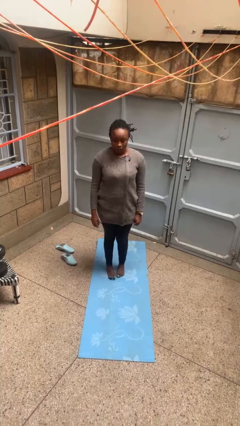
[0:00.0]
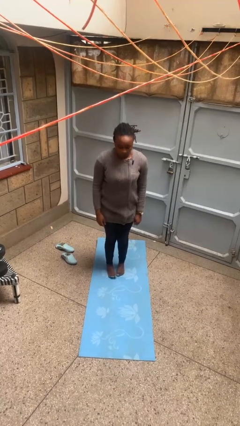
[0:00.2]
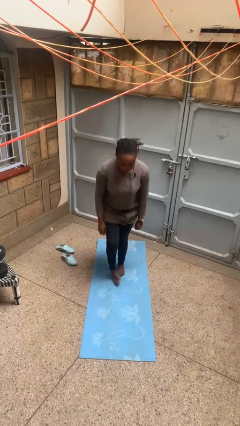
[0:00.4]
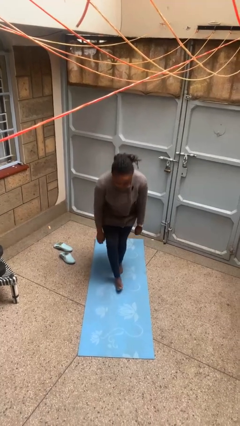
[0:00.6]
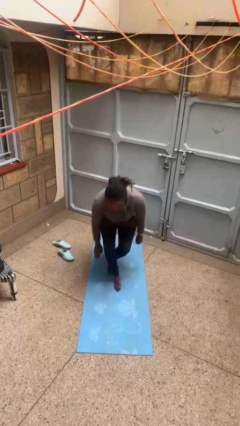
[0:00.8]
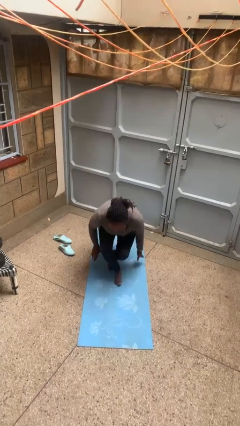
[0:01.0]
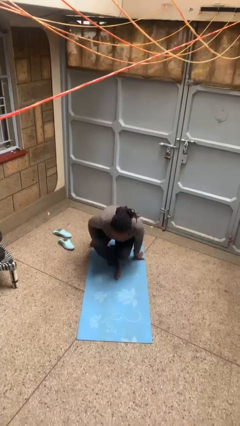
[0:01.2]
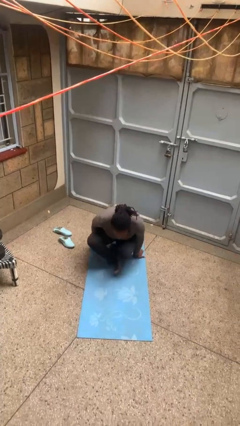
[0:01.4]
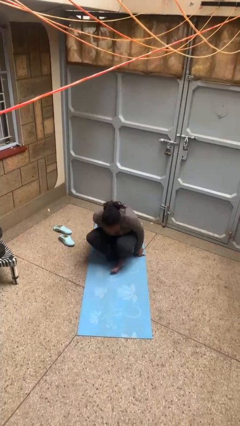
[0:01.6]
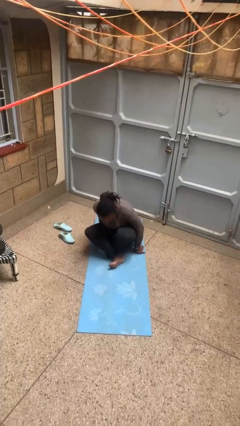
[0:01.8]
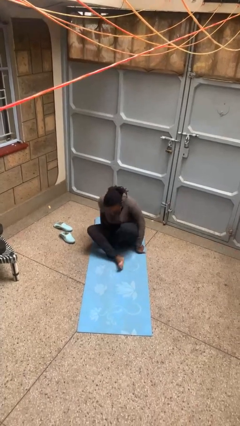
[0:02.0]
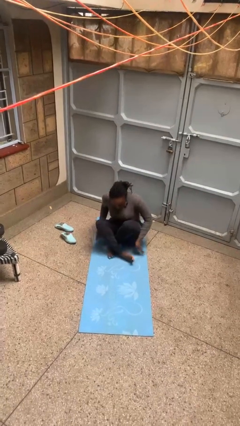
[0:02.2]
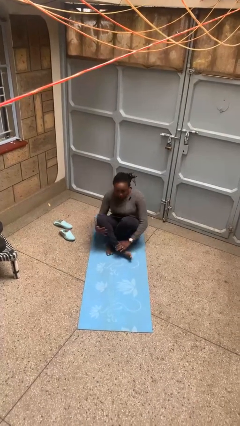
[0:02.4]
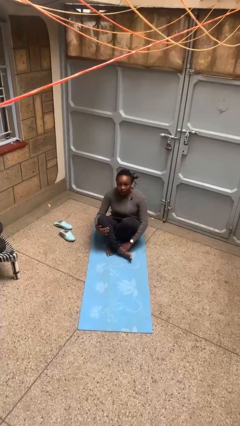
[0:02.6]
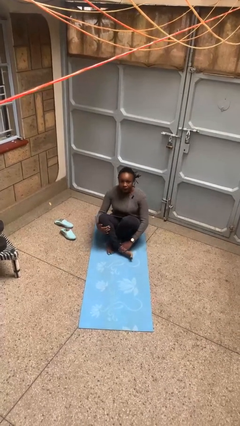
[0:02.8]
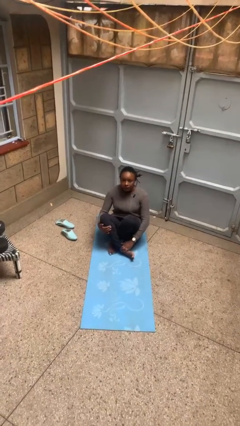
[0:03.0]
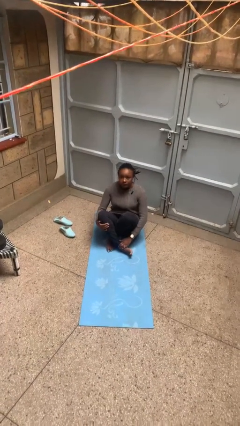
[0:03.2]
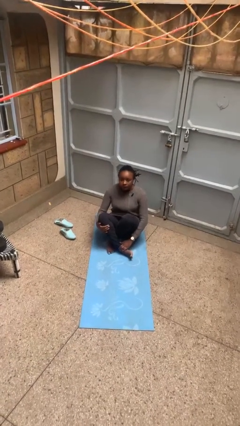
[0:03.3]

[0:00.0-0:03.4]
person sits crisscross

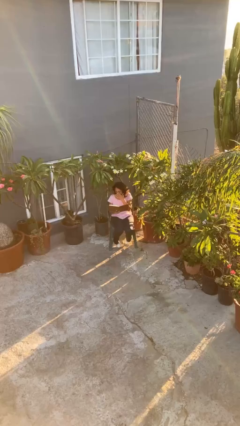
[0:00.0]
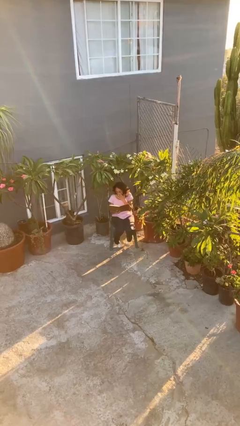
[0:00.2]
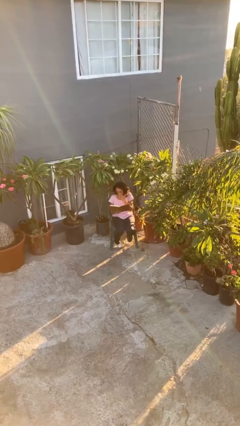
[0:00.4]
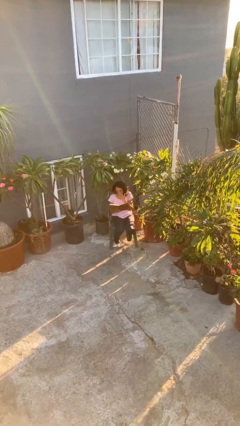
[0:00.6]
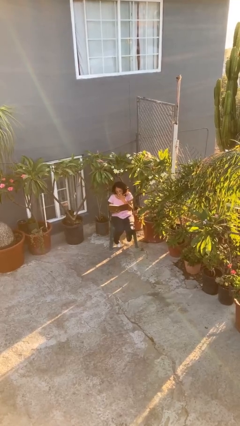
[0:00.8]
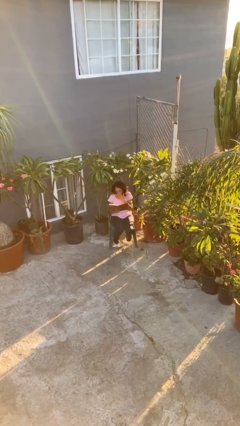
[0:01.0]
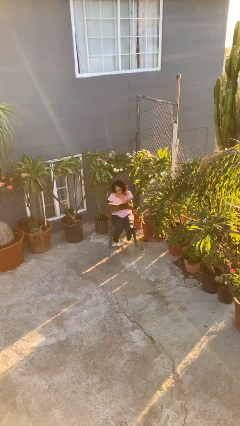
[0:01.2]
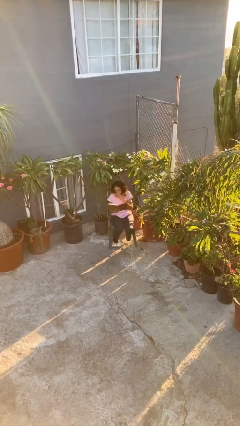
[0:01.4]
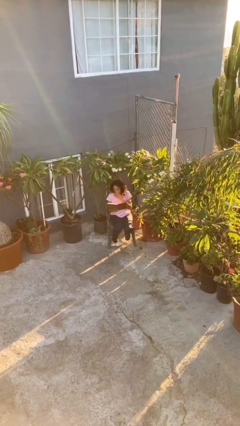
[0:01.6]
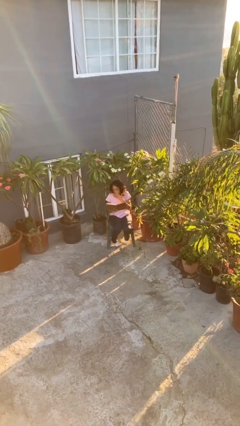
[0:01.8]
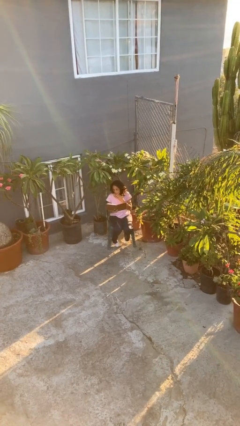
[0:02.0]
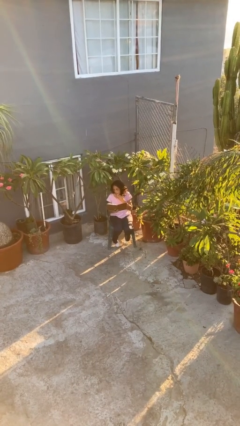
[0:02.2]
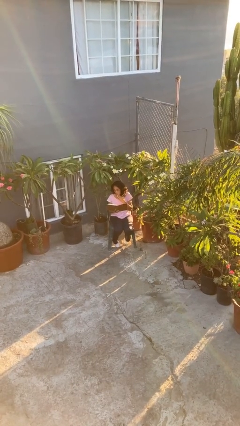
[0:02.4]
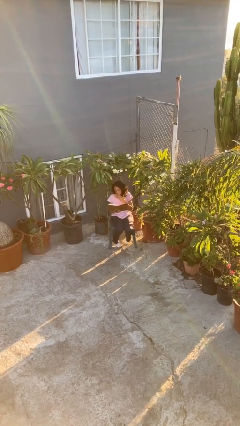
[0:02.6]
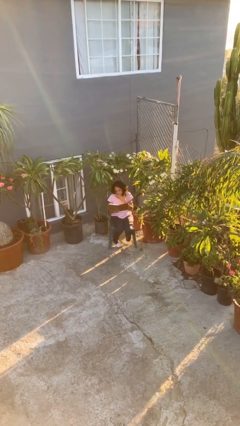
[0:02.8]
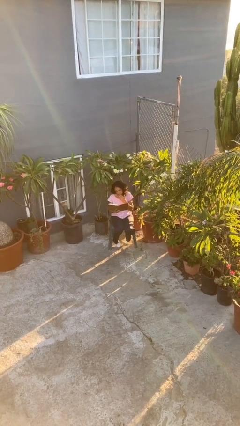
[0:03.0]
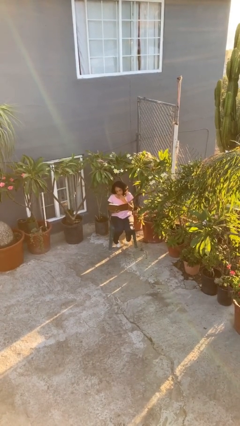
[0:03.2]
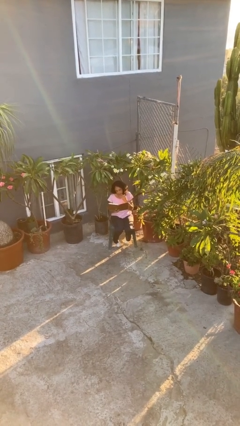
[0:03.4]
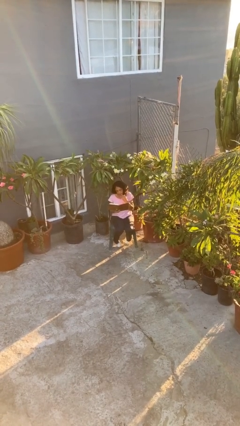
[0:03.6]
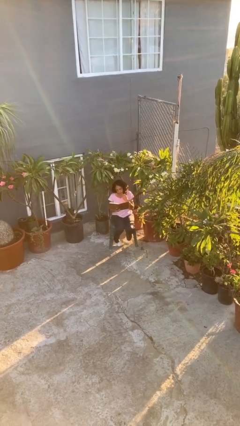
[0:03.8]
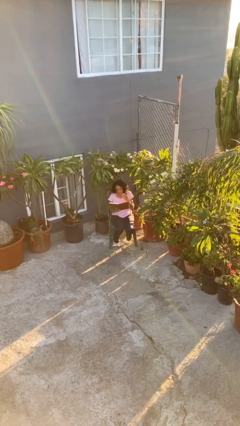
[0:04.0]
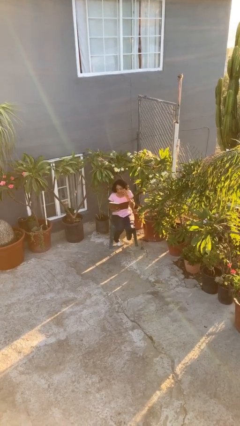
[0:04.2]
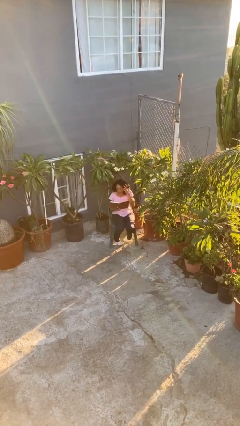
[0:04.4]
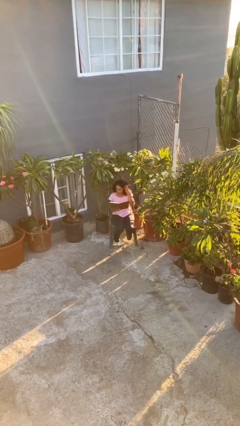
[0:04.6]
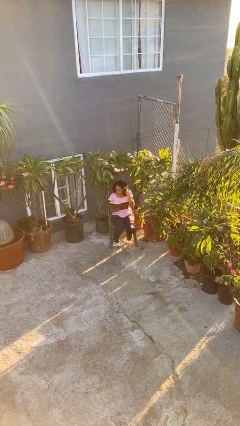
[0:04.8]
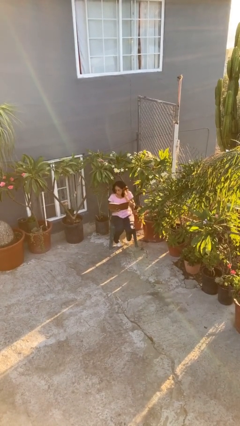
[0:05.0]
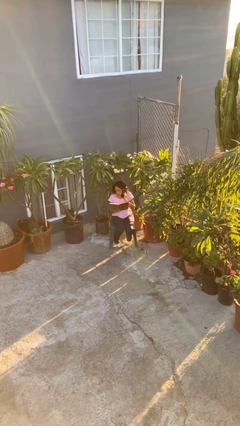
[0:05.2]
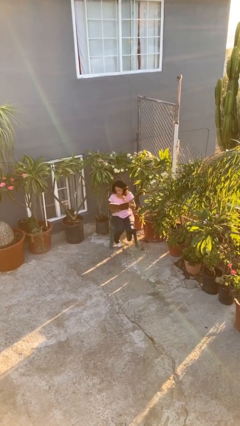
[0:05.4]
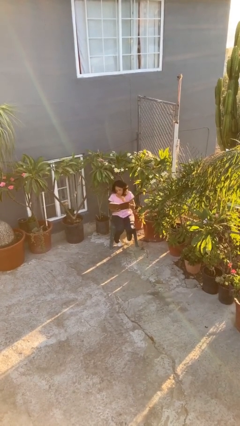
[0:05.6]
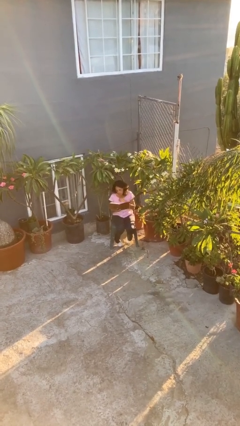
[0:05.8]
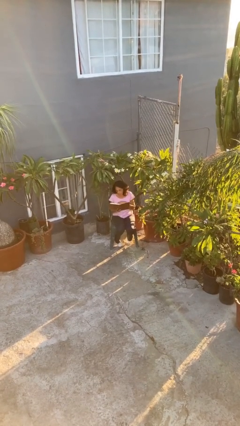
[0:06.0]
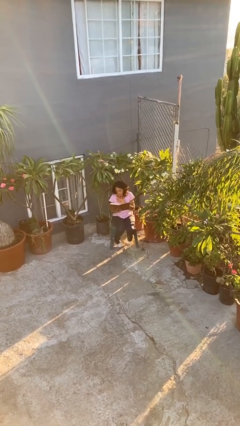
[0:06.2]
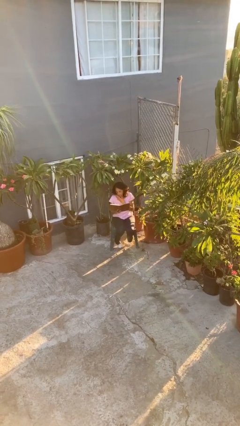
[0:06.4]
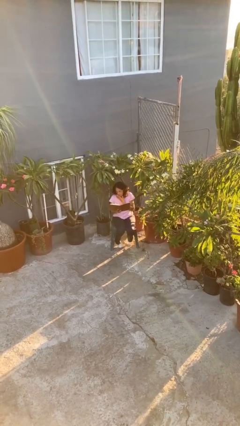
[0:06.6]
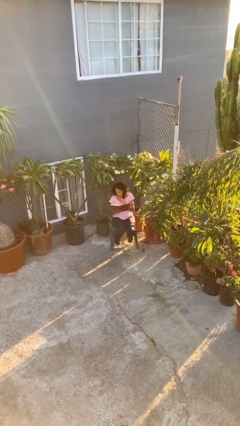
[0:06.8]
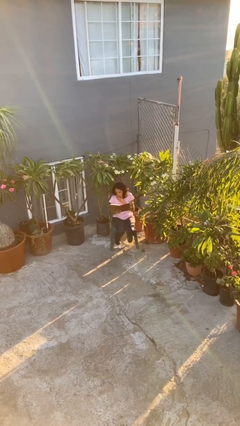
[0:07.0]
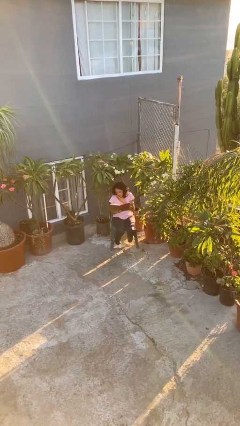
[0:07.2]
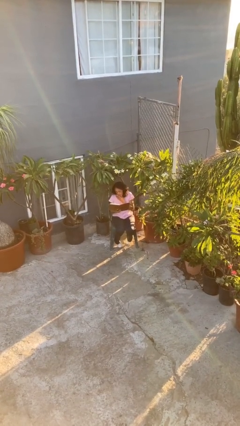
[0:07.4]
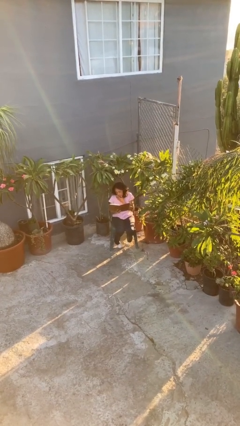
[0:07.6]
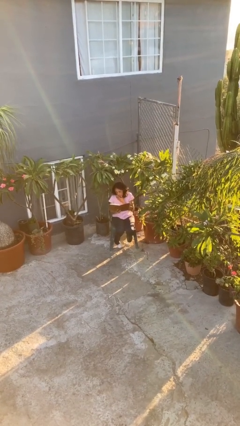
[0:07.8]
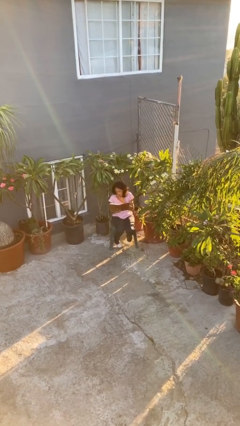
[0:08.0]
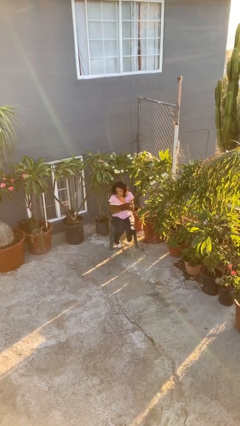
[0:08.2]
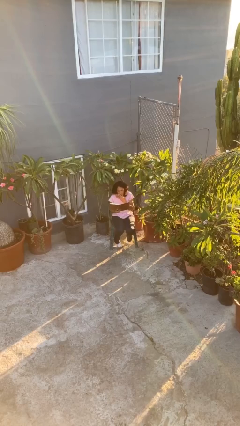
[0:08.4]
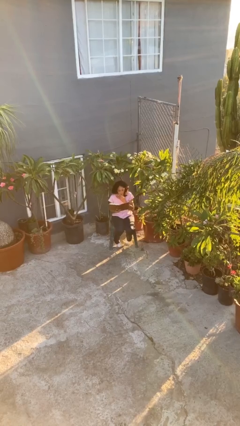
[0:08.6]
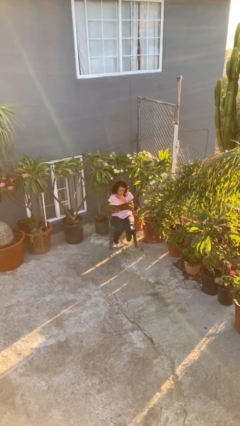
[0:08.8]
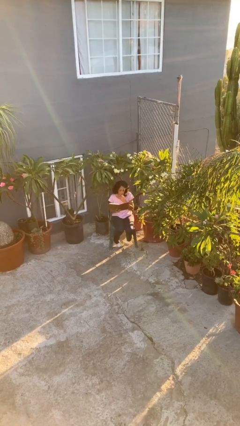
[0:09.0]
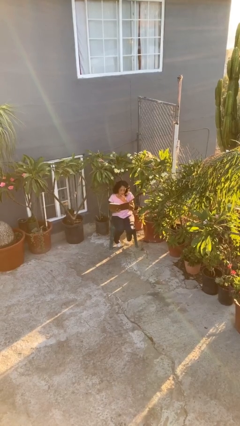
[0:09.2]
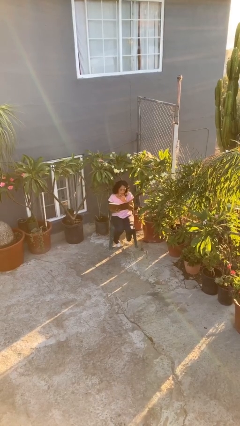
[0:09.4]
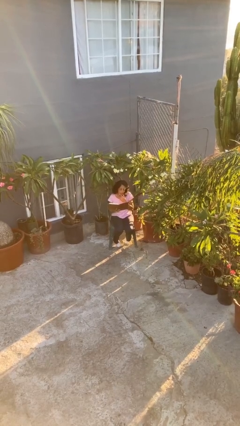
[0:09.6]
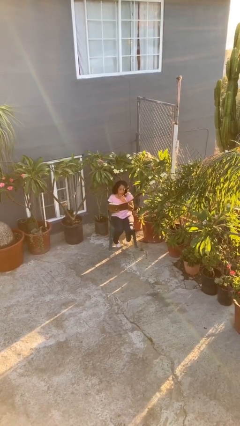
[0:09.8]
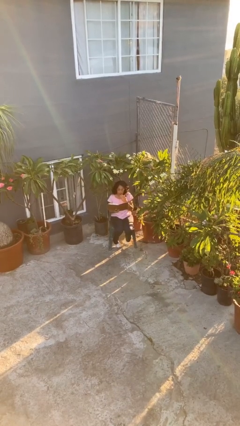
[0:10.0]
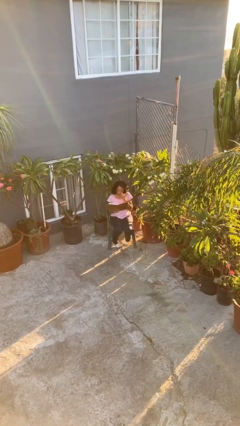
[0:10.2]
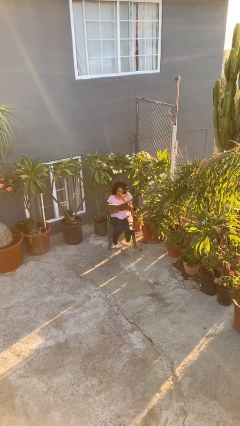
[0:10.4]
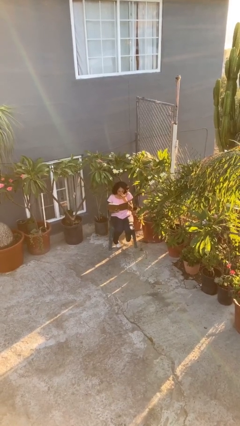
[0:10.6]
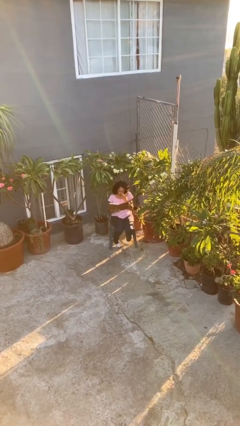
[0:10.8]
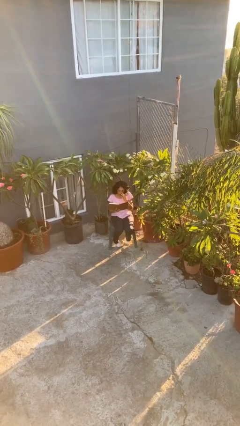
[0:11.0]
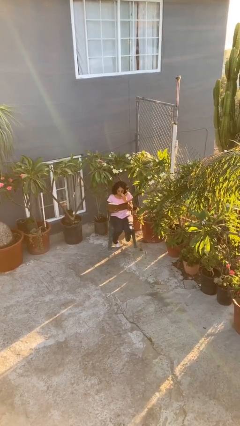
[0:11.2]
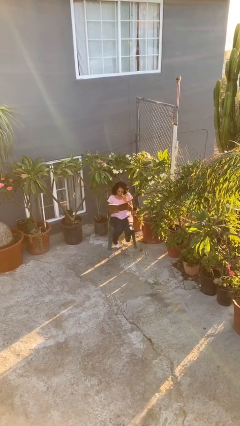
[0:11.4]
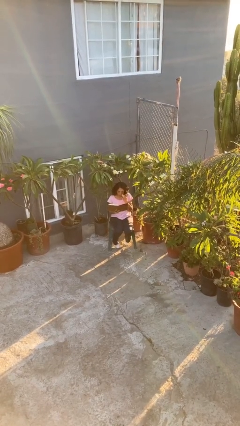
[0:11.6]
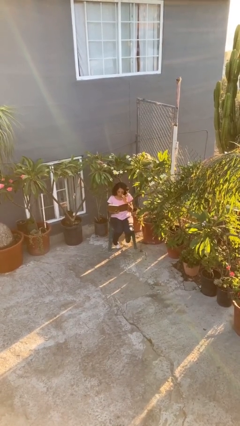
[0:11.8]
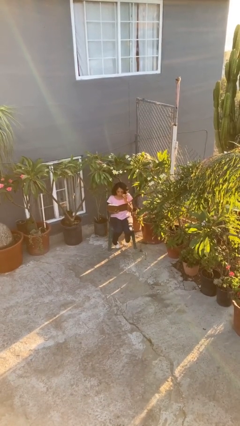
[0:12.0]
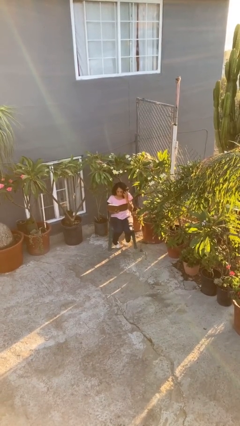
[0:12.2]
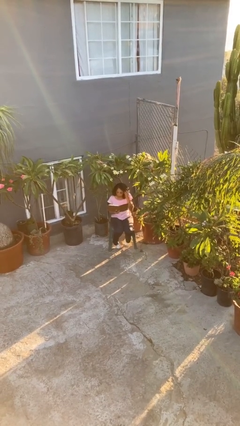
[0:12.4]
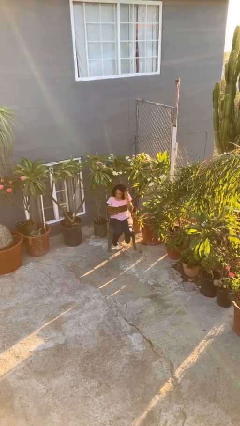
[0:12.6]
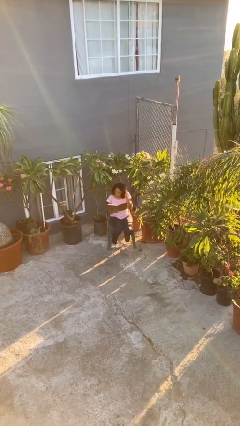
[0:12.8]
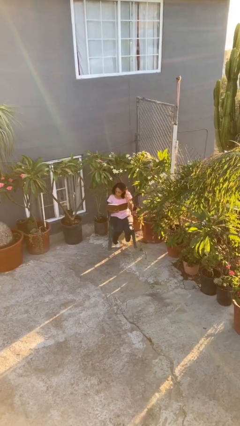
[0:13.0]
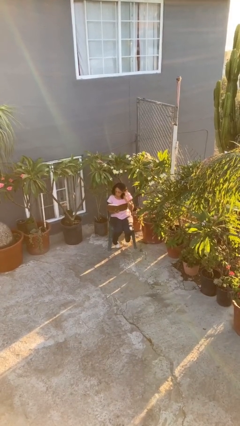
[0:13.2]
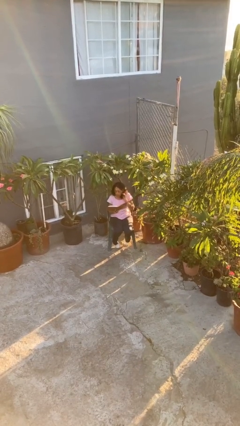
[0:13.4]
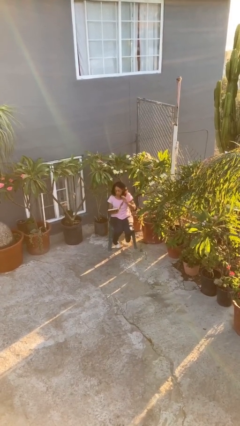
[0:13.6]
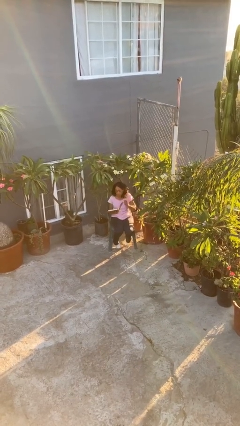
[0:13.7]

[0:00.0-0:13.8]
person reads document

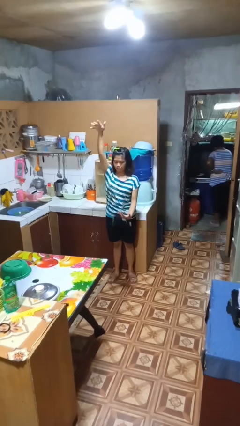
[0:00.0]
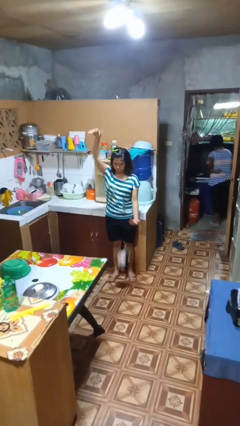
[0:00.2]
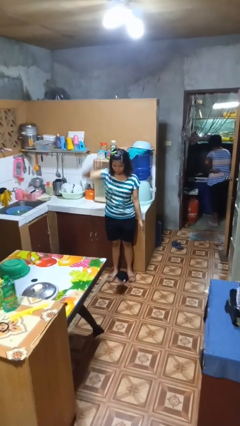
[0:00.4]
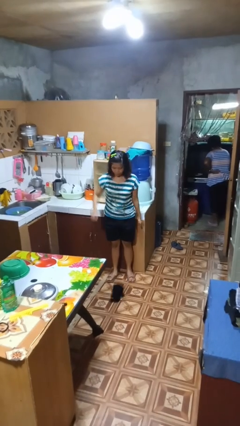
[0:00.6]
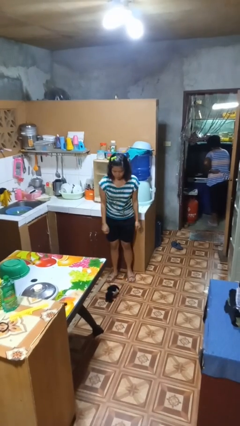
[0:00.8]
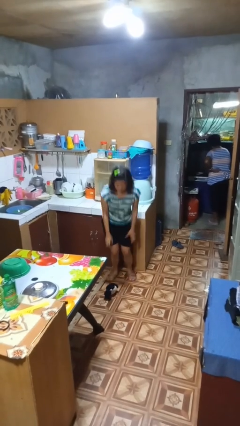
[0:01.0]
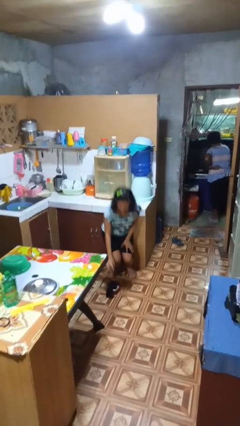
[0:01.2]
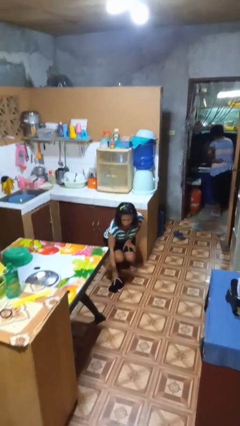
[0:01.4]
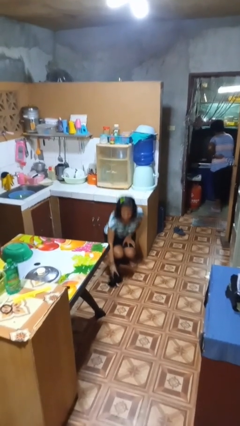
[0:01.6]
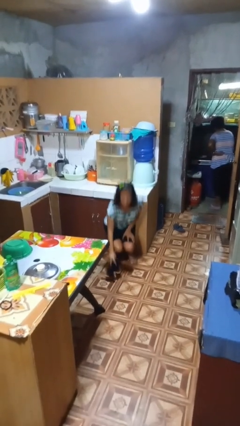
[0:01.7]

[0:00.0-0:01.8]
person catches dropped object
